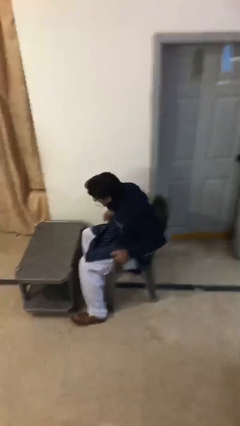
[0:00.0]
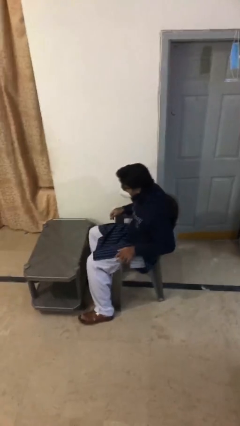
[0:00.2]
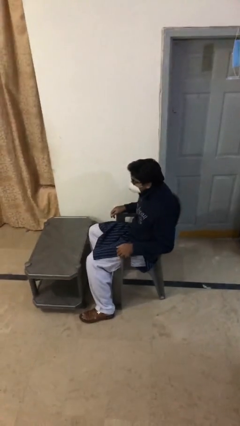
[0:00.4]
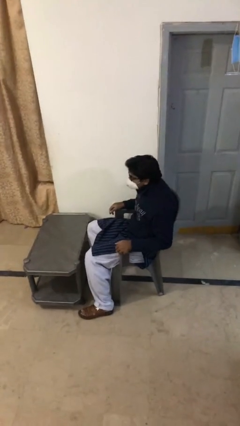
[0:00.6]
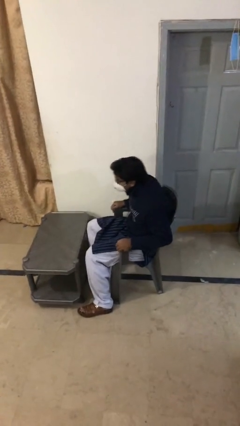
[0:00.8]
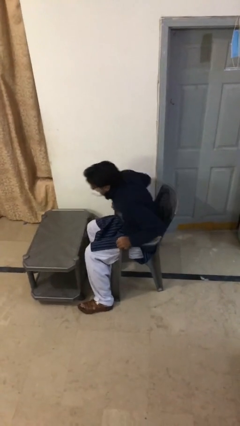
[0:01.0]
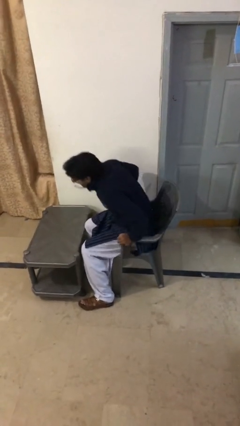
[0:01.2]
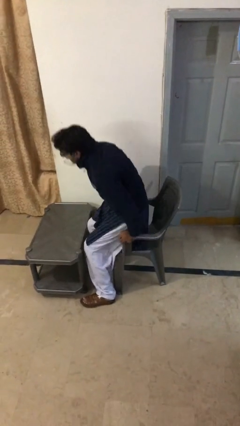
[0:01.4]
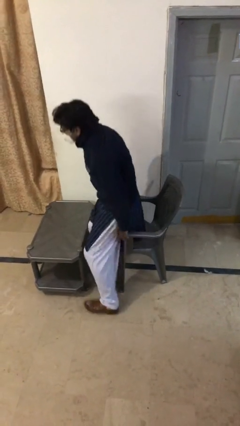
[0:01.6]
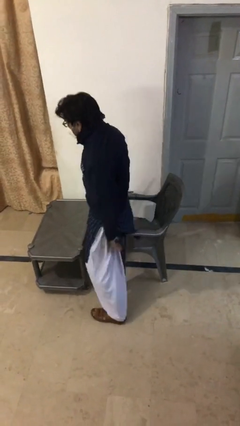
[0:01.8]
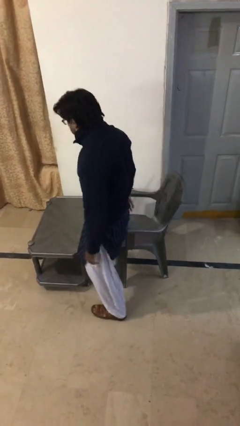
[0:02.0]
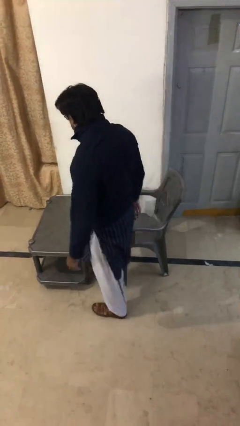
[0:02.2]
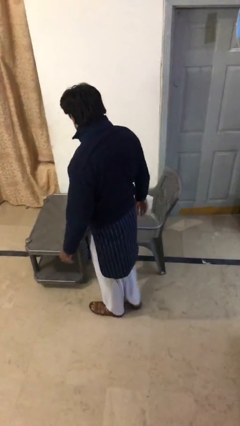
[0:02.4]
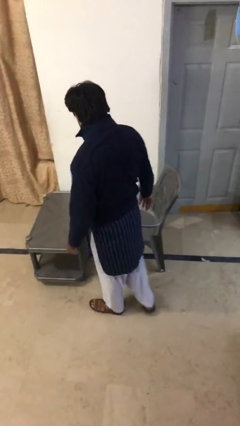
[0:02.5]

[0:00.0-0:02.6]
person stands up

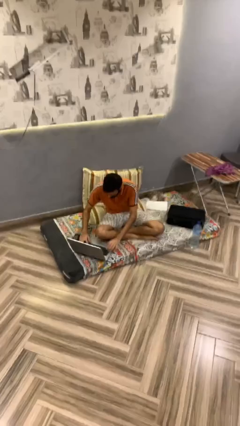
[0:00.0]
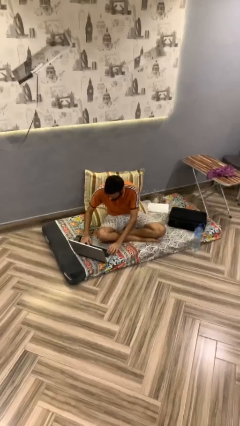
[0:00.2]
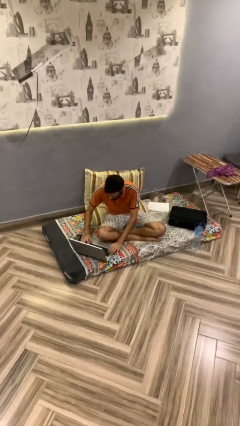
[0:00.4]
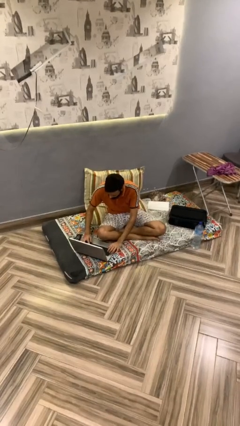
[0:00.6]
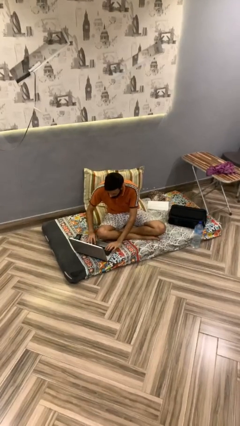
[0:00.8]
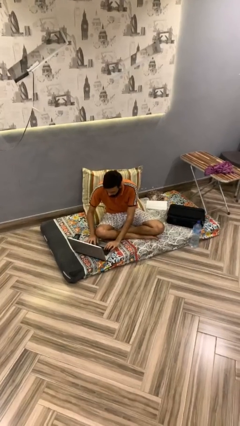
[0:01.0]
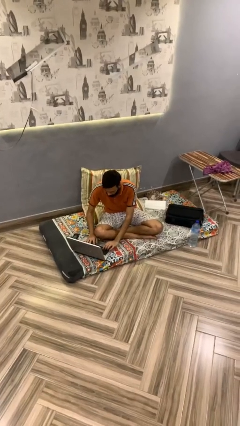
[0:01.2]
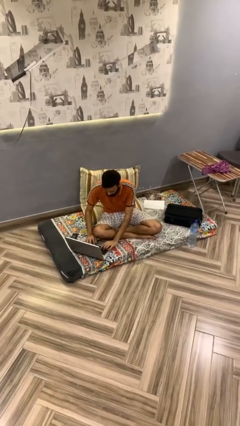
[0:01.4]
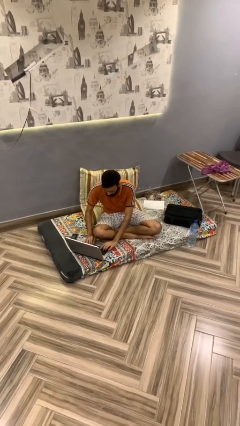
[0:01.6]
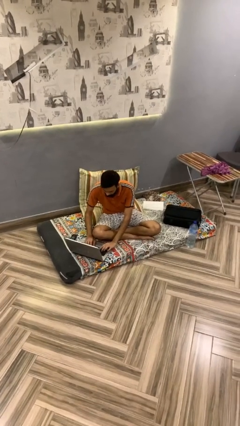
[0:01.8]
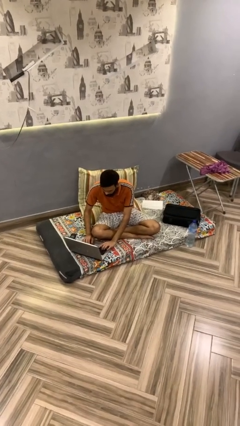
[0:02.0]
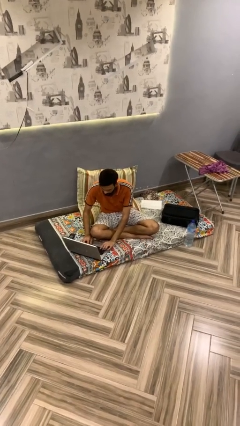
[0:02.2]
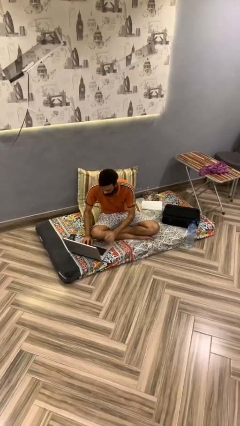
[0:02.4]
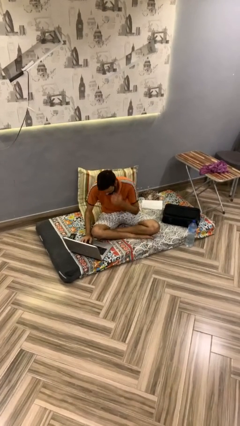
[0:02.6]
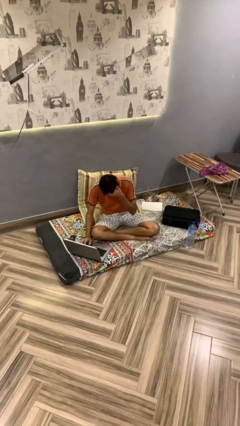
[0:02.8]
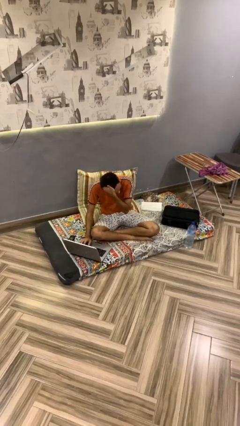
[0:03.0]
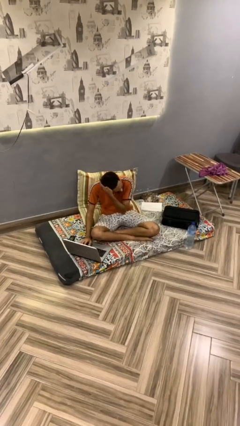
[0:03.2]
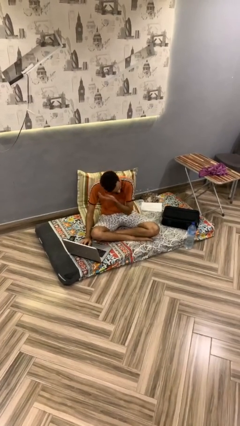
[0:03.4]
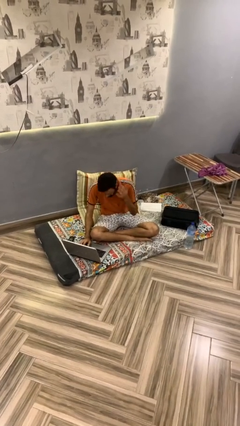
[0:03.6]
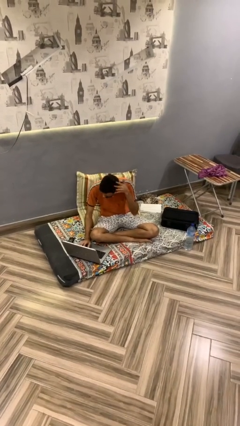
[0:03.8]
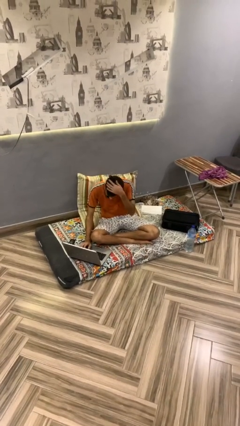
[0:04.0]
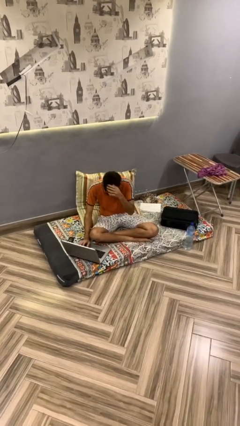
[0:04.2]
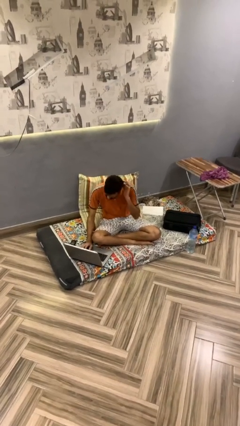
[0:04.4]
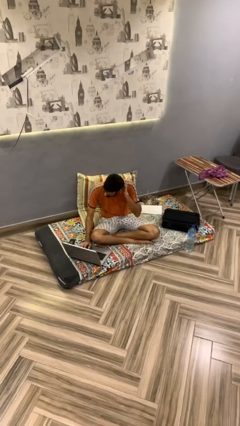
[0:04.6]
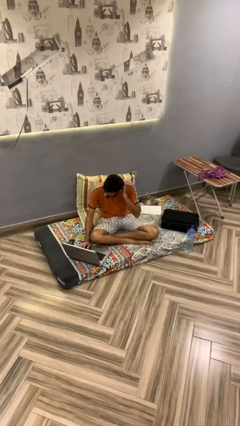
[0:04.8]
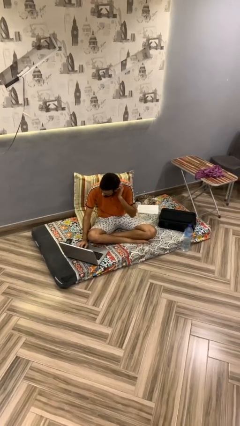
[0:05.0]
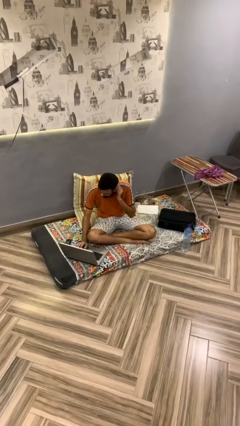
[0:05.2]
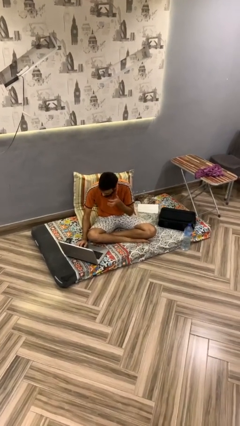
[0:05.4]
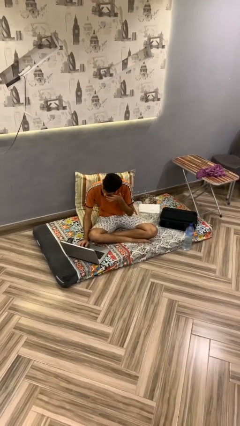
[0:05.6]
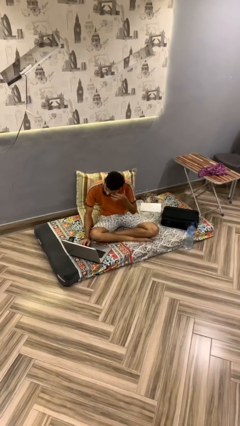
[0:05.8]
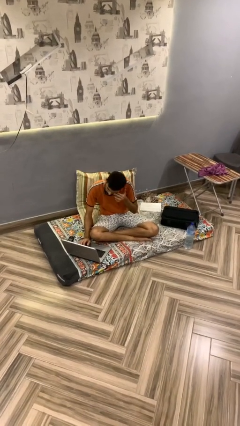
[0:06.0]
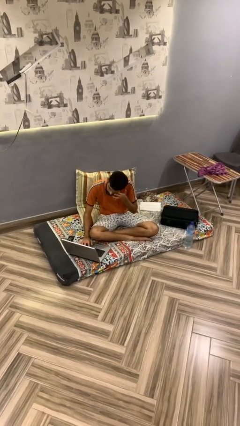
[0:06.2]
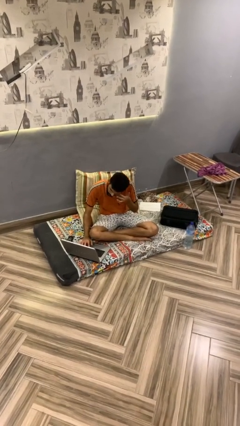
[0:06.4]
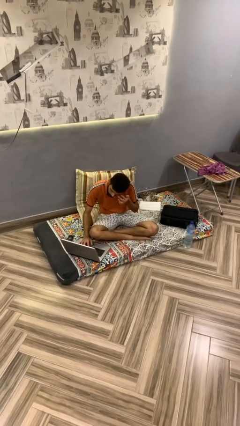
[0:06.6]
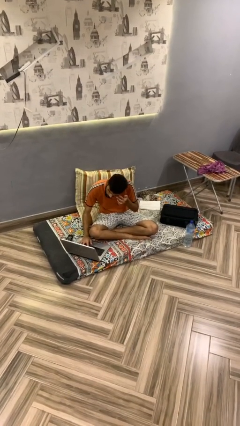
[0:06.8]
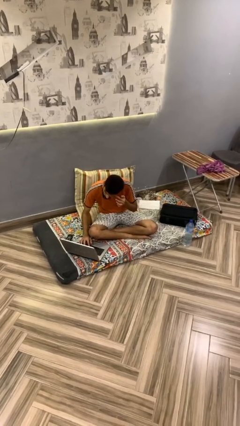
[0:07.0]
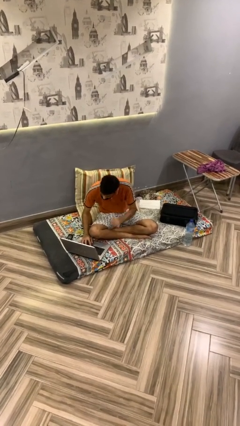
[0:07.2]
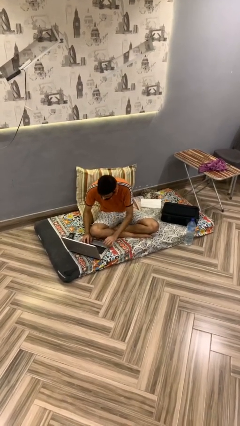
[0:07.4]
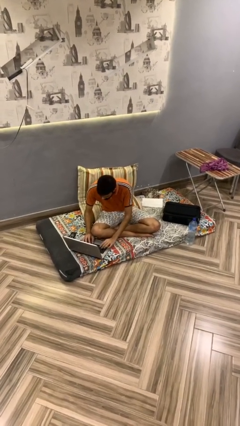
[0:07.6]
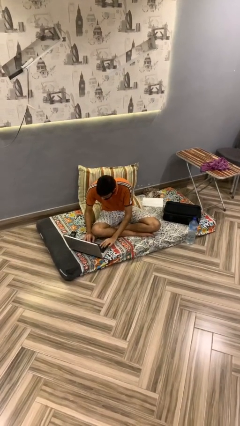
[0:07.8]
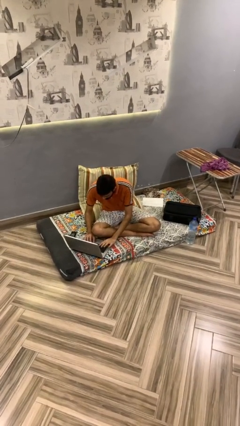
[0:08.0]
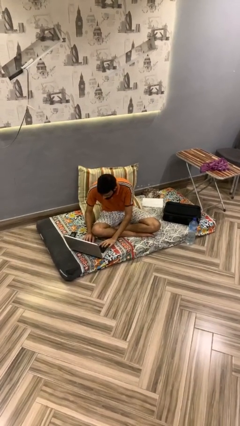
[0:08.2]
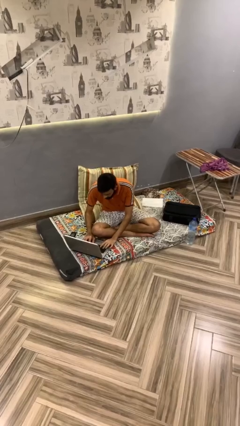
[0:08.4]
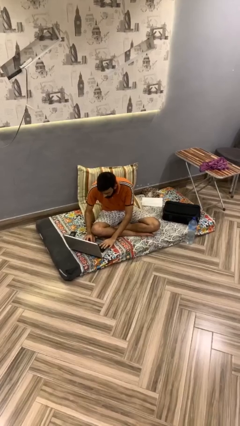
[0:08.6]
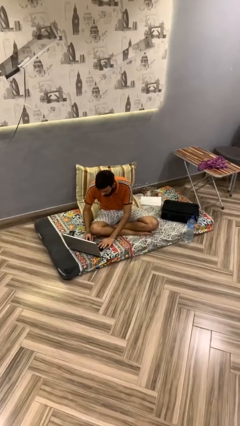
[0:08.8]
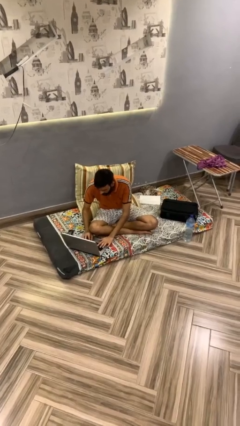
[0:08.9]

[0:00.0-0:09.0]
person interacts with laptop

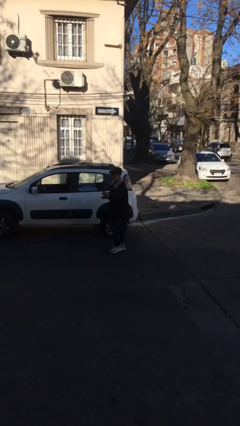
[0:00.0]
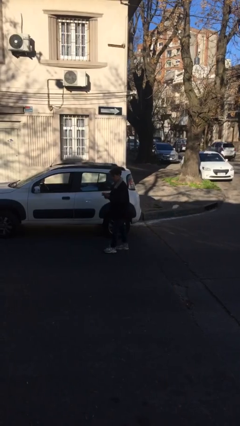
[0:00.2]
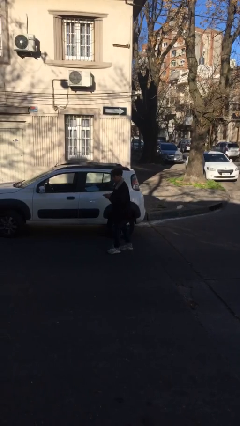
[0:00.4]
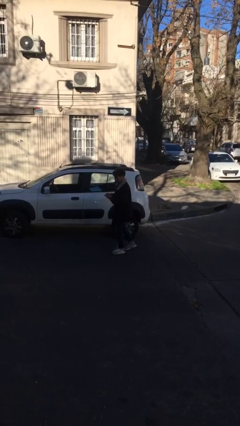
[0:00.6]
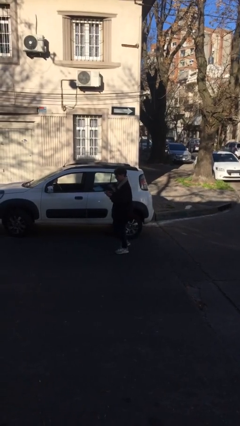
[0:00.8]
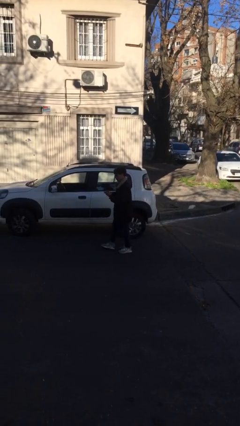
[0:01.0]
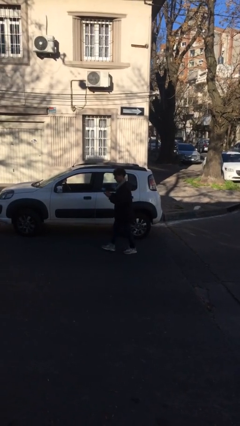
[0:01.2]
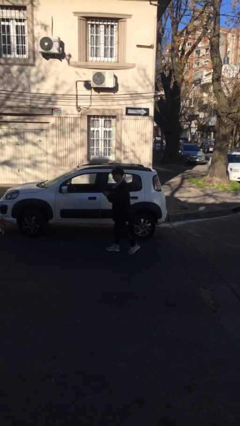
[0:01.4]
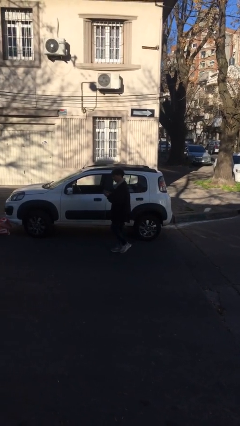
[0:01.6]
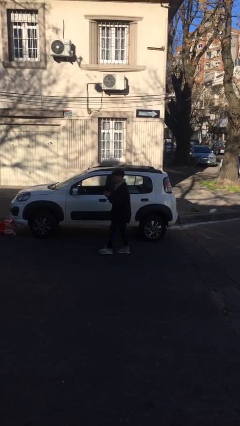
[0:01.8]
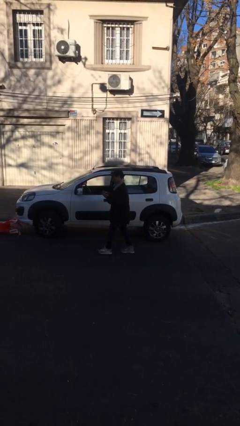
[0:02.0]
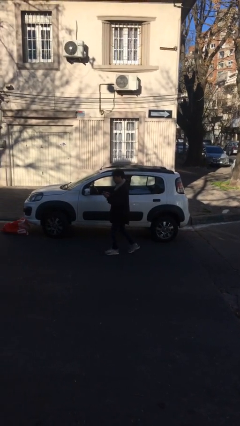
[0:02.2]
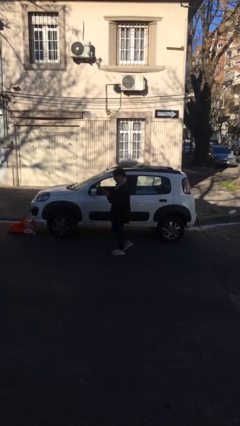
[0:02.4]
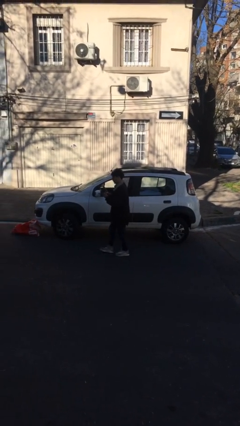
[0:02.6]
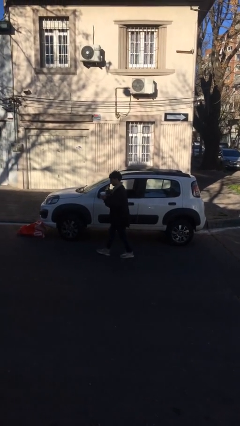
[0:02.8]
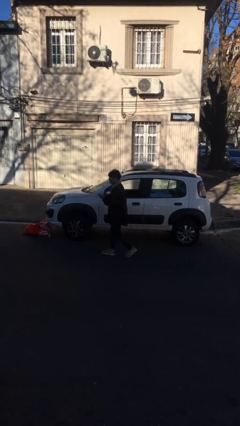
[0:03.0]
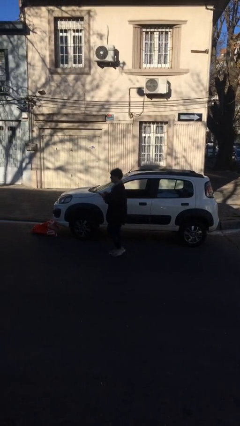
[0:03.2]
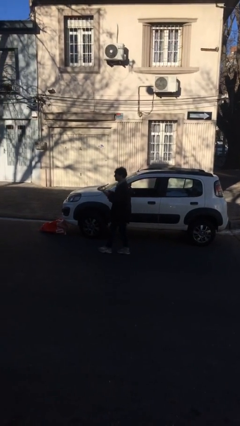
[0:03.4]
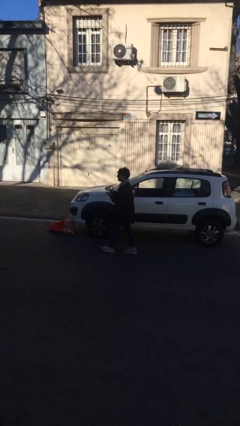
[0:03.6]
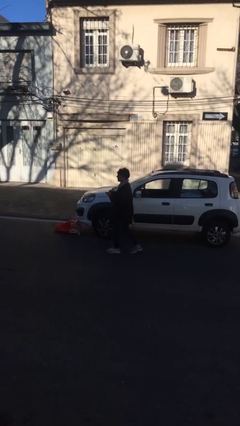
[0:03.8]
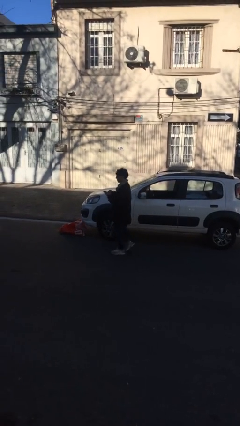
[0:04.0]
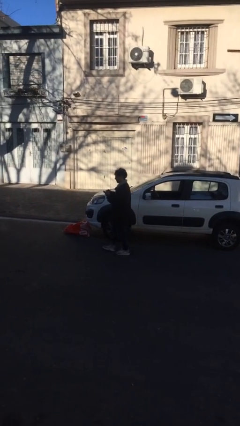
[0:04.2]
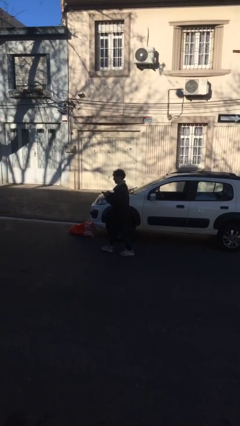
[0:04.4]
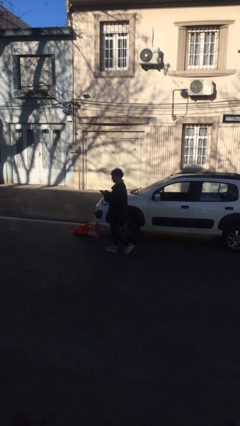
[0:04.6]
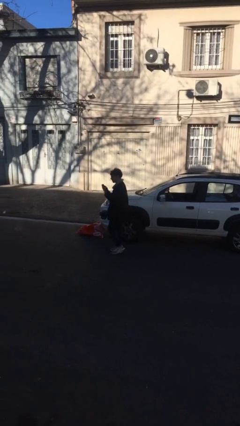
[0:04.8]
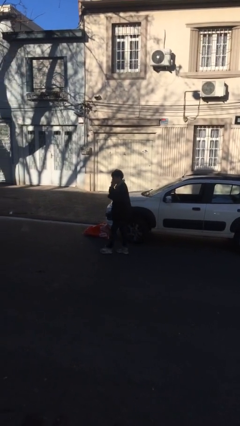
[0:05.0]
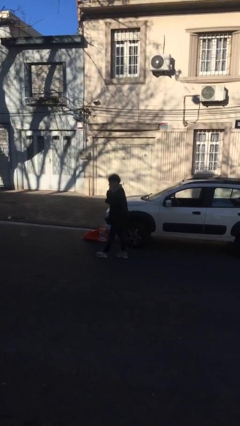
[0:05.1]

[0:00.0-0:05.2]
person texts on phone

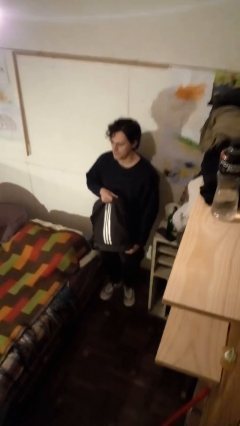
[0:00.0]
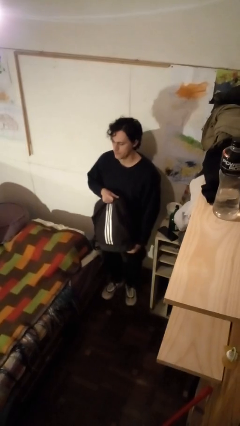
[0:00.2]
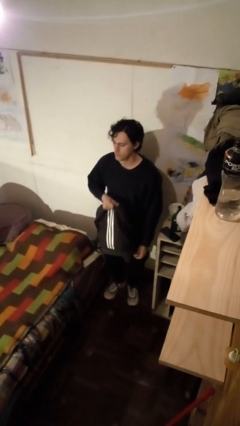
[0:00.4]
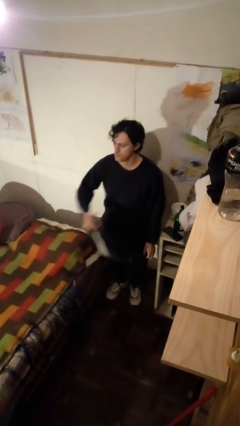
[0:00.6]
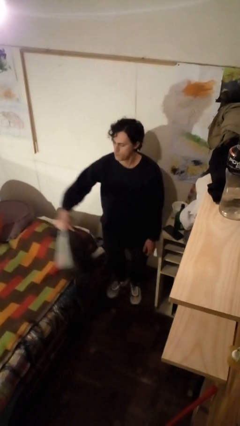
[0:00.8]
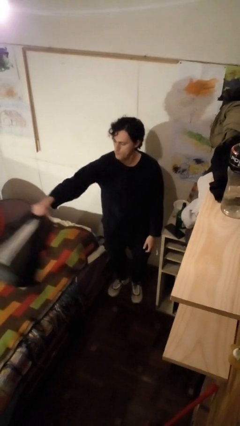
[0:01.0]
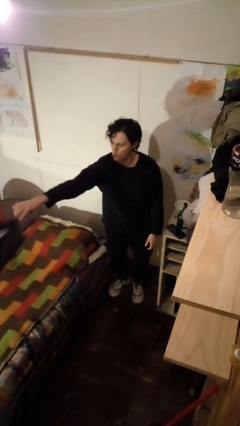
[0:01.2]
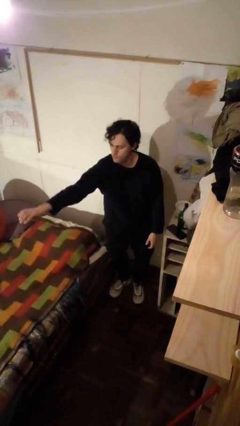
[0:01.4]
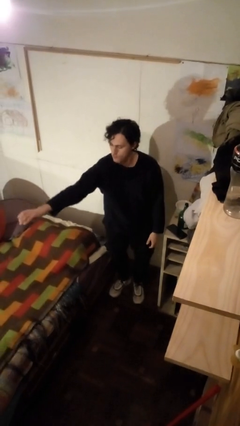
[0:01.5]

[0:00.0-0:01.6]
person throws object on bed
